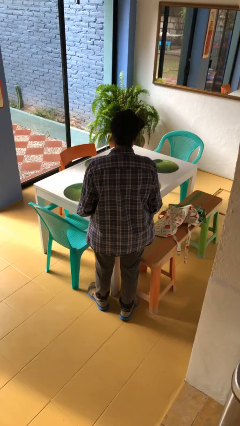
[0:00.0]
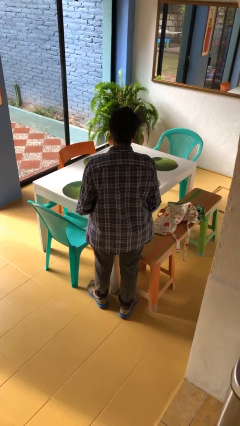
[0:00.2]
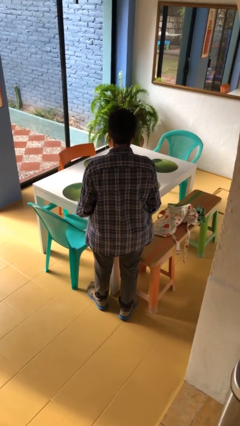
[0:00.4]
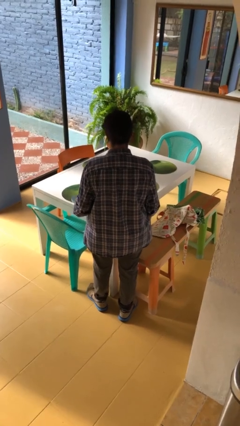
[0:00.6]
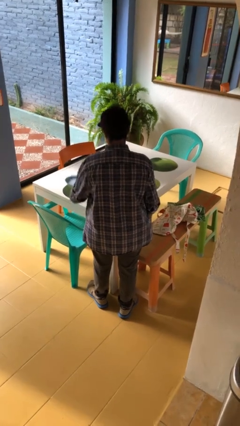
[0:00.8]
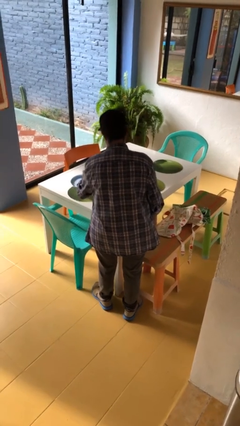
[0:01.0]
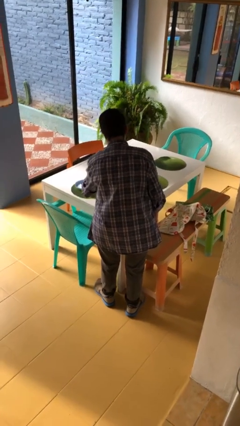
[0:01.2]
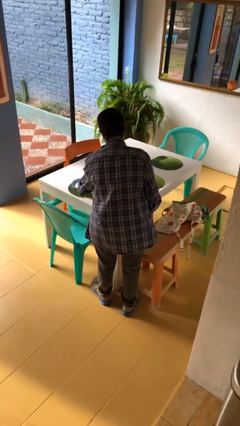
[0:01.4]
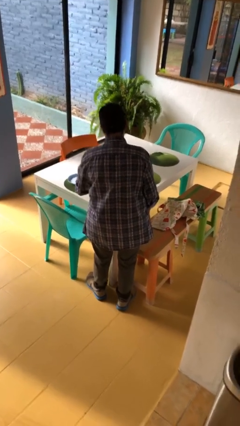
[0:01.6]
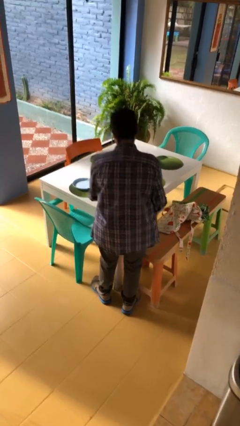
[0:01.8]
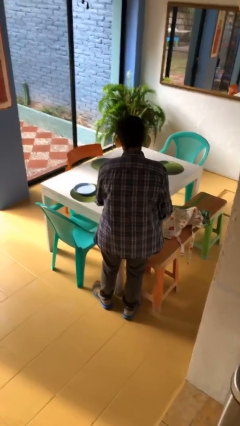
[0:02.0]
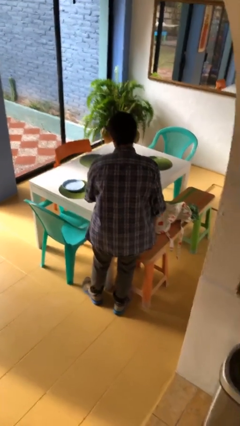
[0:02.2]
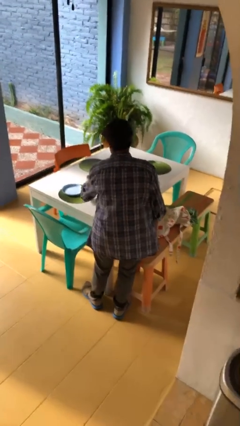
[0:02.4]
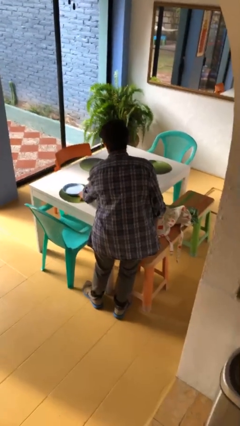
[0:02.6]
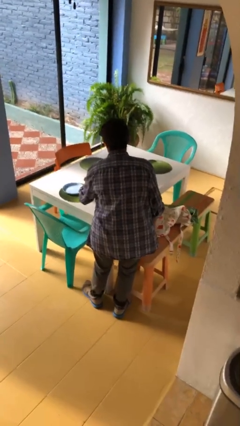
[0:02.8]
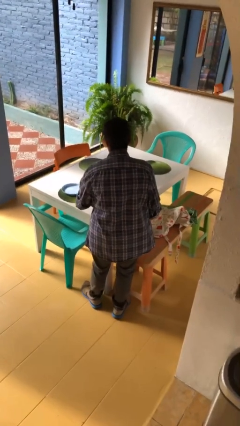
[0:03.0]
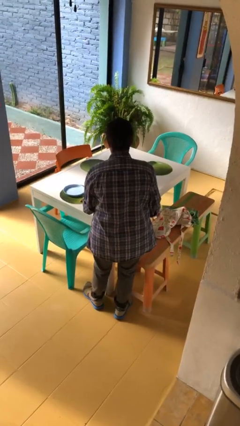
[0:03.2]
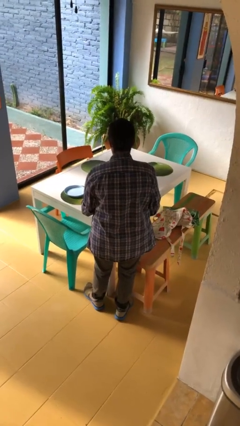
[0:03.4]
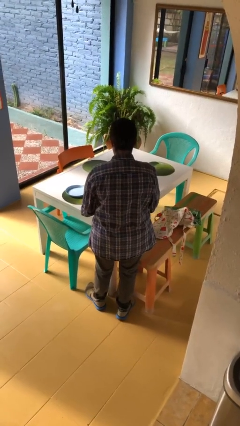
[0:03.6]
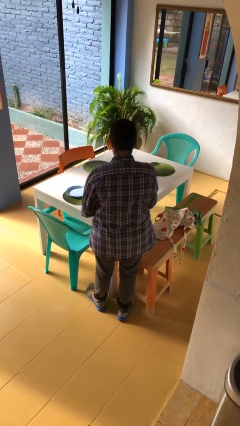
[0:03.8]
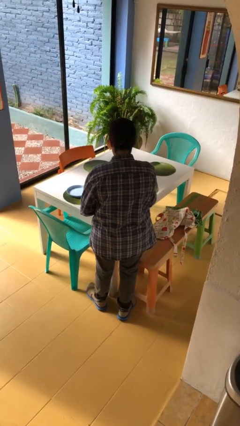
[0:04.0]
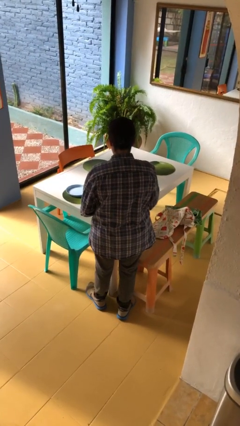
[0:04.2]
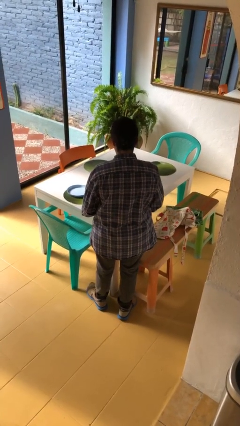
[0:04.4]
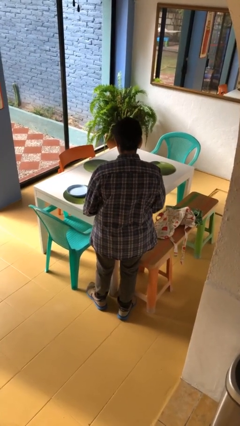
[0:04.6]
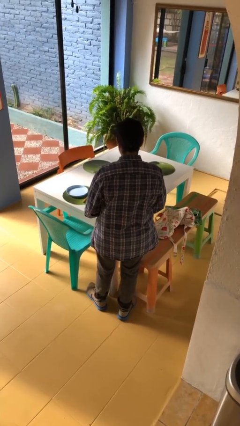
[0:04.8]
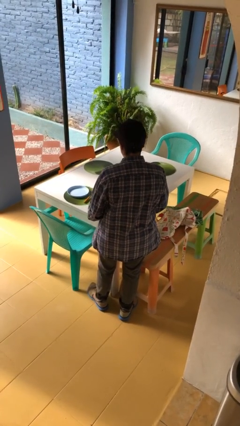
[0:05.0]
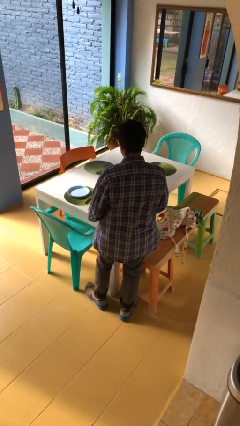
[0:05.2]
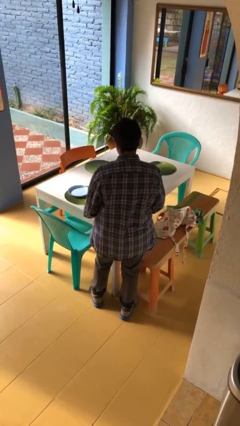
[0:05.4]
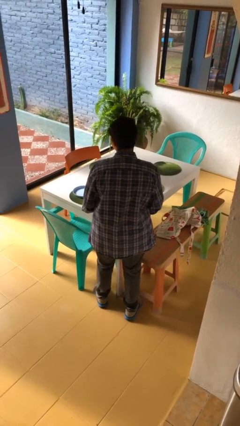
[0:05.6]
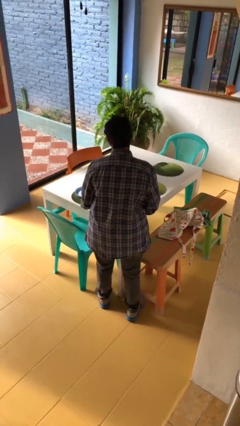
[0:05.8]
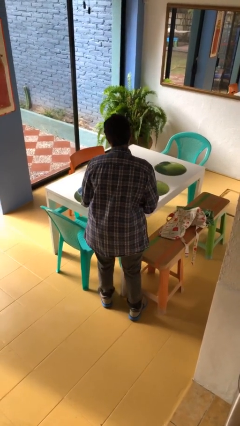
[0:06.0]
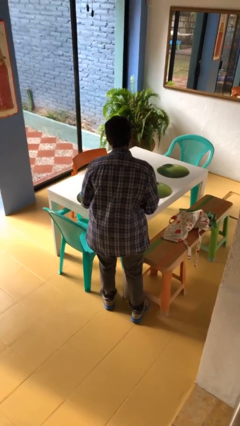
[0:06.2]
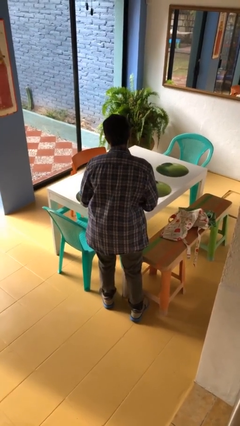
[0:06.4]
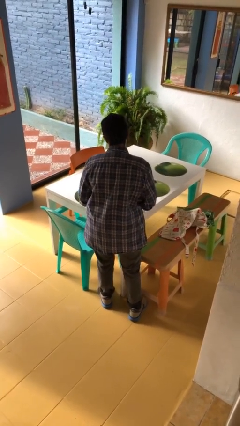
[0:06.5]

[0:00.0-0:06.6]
person sets table

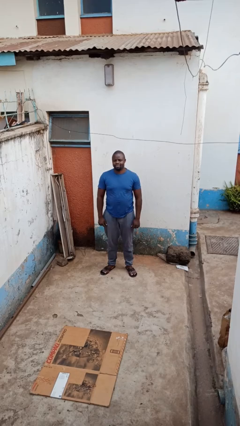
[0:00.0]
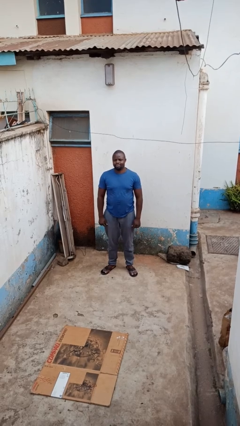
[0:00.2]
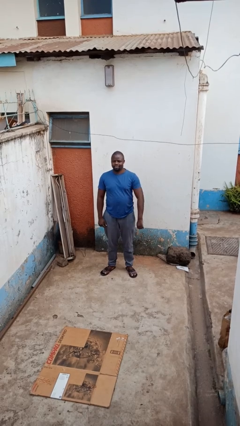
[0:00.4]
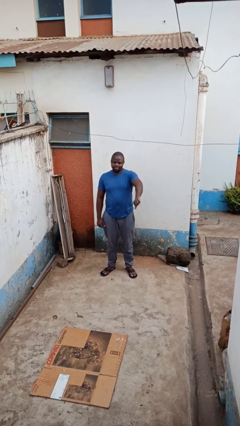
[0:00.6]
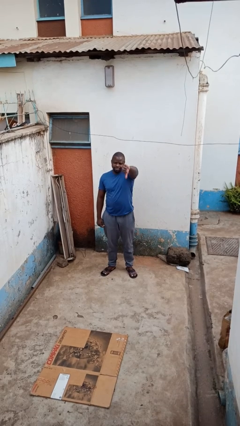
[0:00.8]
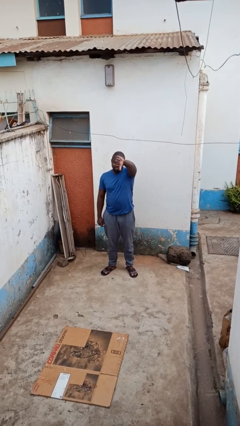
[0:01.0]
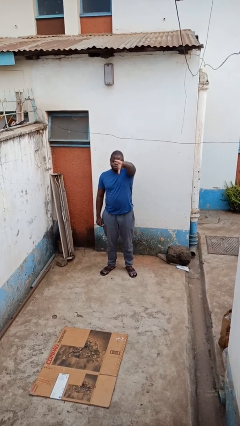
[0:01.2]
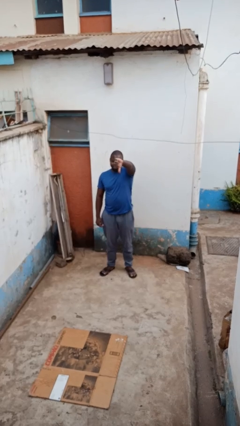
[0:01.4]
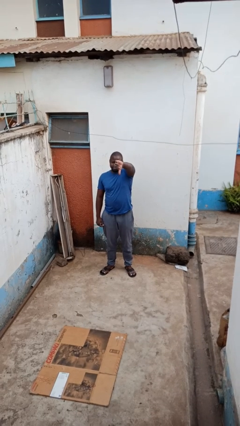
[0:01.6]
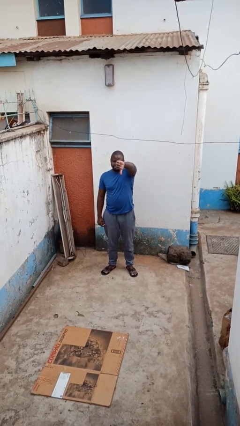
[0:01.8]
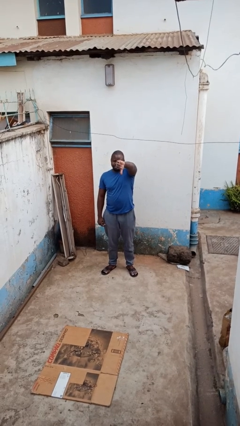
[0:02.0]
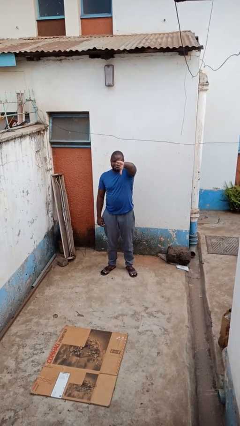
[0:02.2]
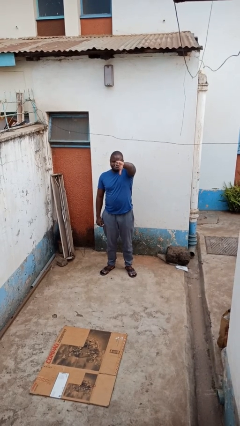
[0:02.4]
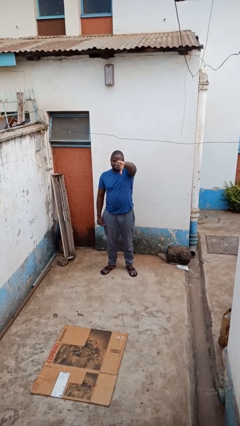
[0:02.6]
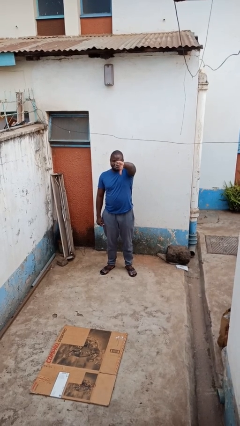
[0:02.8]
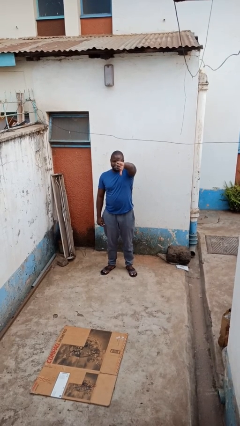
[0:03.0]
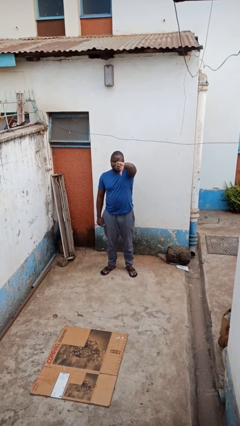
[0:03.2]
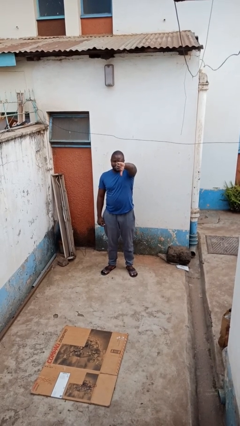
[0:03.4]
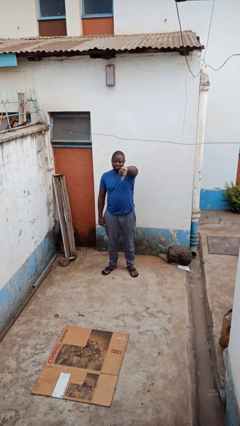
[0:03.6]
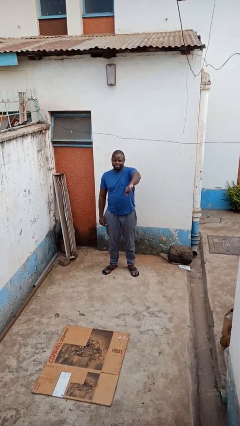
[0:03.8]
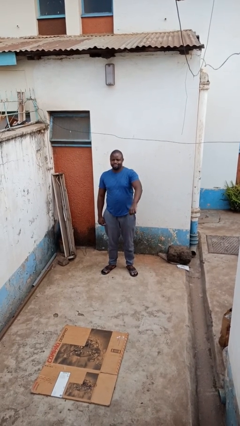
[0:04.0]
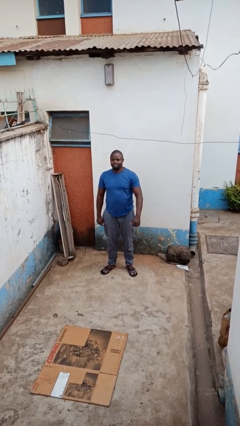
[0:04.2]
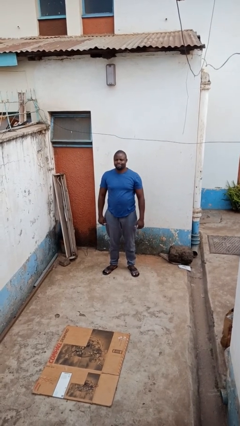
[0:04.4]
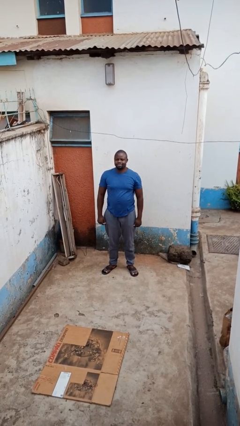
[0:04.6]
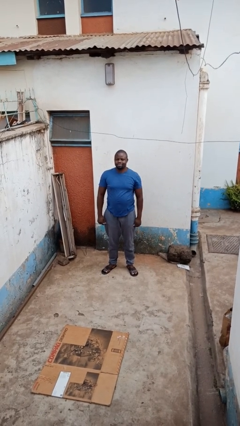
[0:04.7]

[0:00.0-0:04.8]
person gestures thumbs down

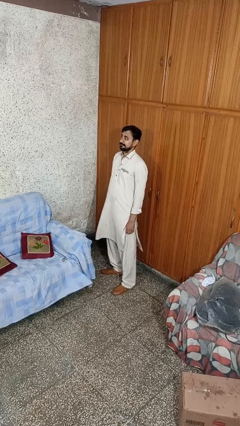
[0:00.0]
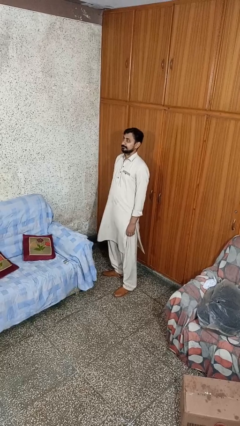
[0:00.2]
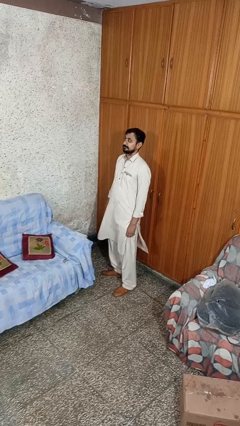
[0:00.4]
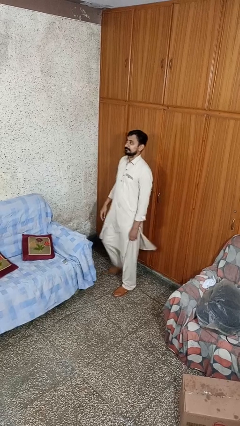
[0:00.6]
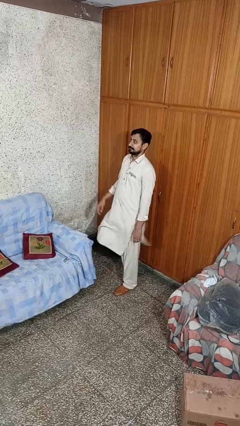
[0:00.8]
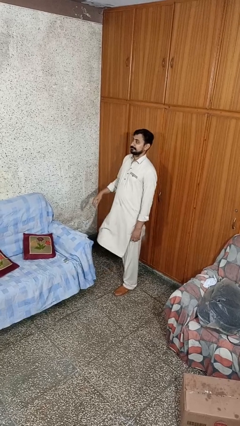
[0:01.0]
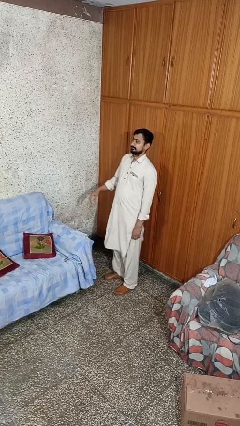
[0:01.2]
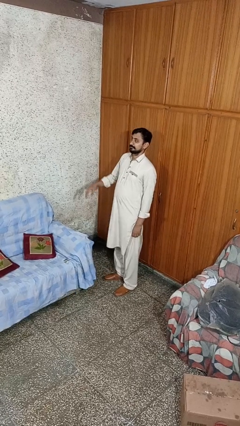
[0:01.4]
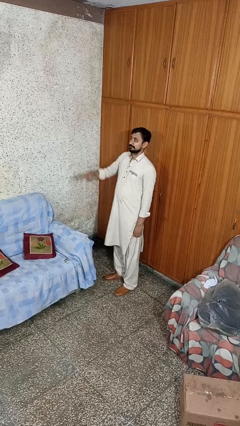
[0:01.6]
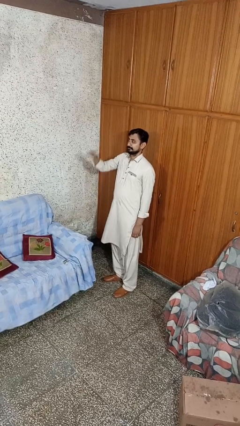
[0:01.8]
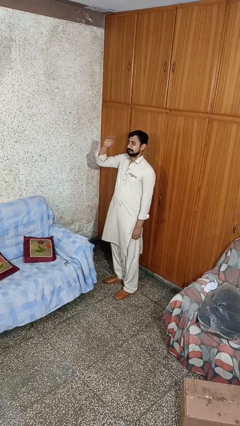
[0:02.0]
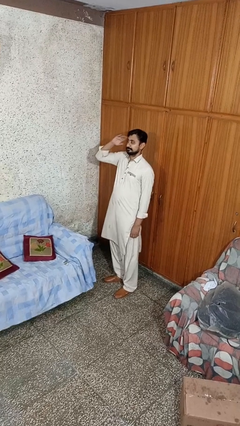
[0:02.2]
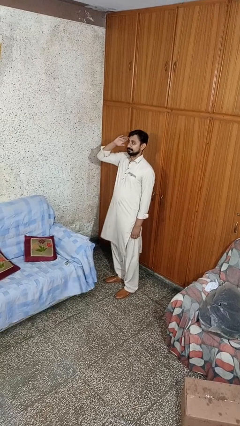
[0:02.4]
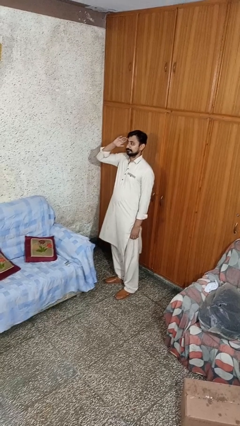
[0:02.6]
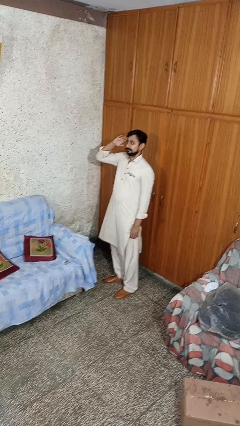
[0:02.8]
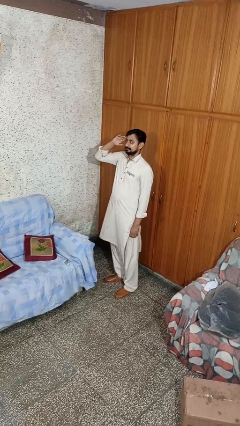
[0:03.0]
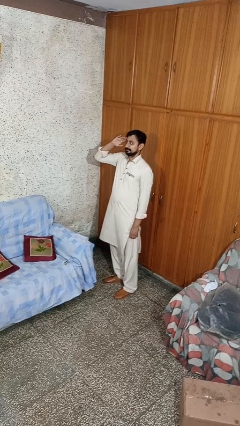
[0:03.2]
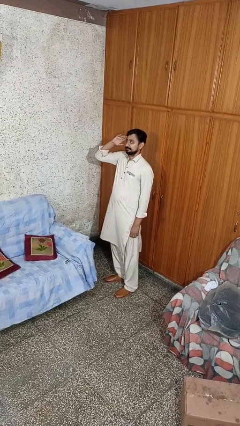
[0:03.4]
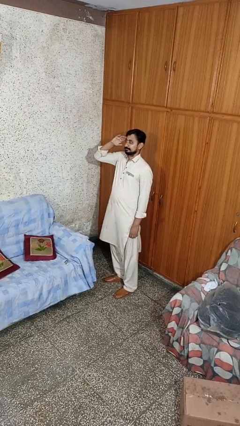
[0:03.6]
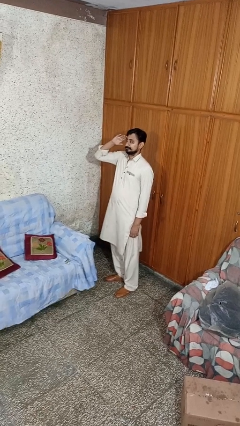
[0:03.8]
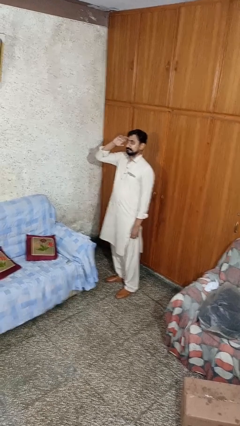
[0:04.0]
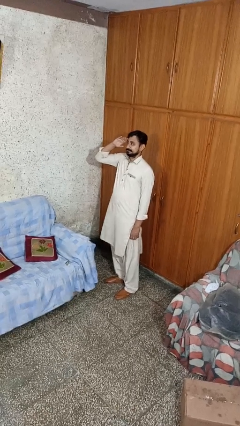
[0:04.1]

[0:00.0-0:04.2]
person salutes

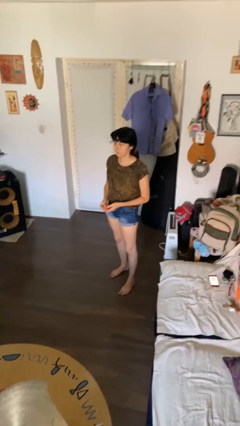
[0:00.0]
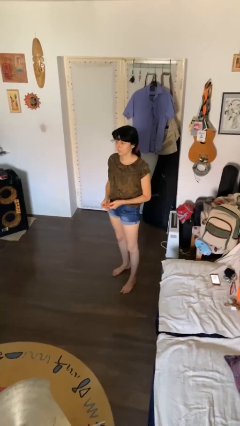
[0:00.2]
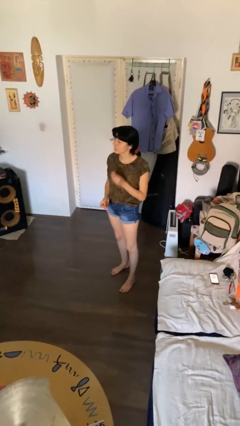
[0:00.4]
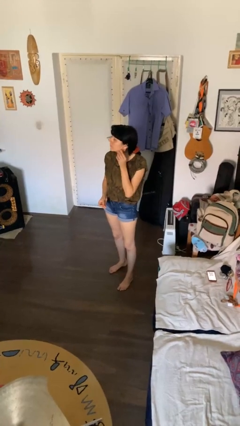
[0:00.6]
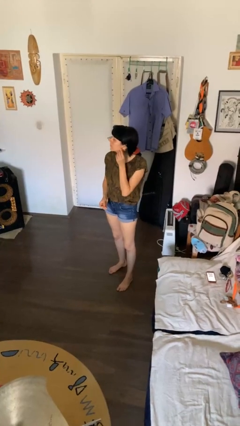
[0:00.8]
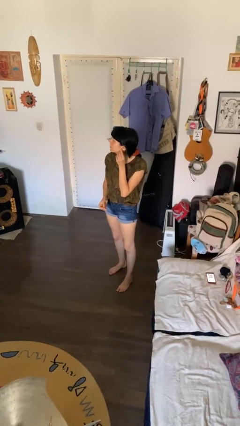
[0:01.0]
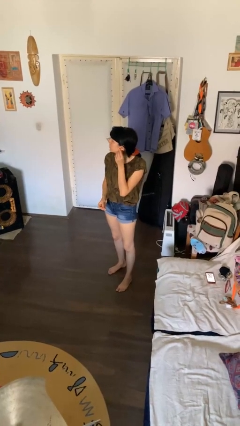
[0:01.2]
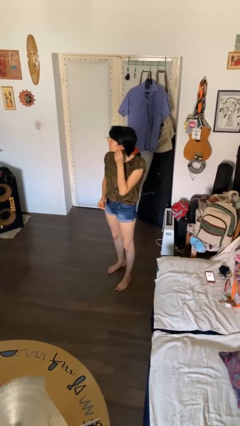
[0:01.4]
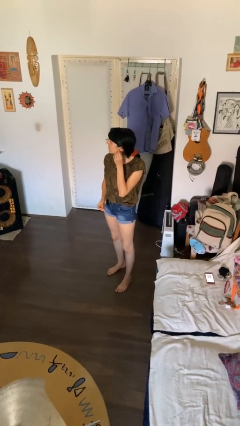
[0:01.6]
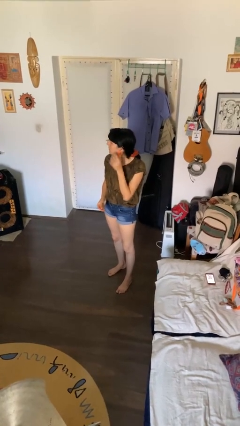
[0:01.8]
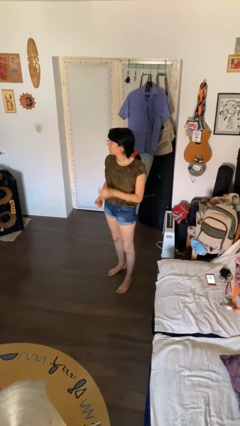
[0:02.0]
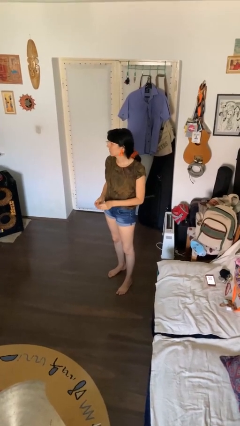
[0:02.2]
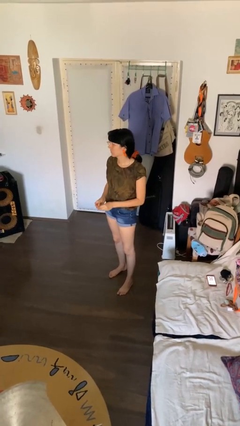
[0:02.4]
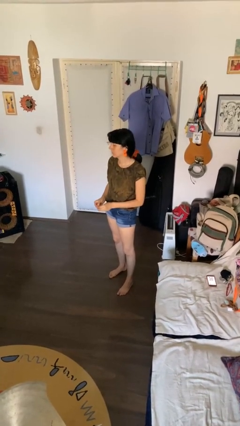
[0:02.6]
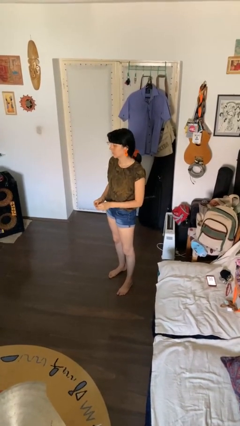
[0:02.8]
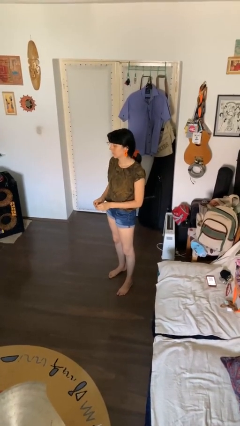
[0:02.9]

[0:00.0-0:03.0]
person puts on earrings
